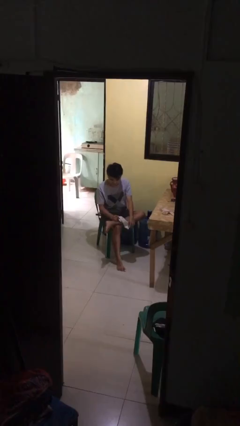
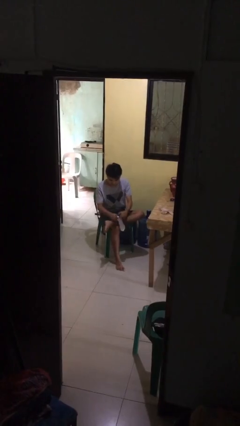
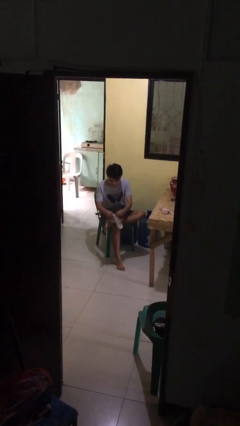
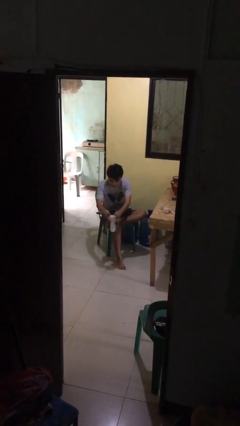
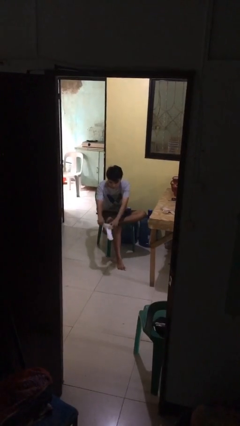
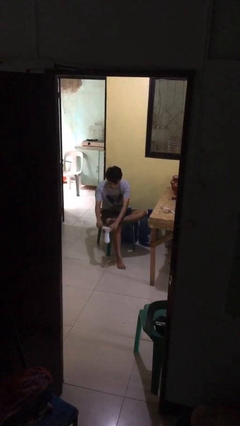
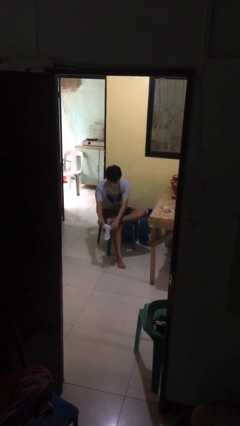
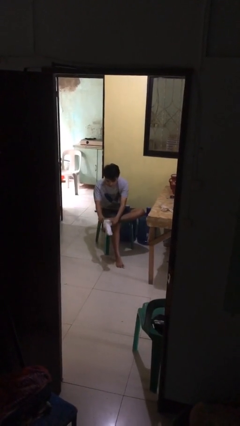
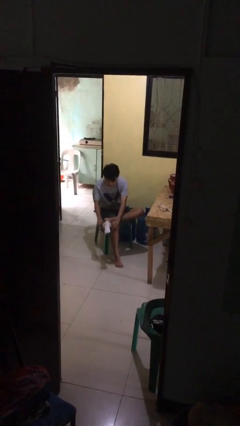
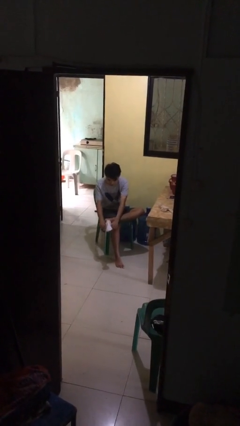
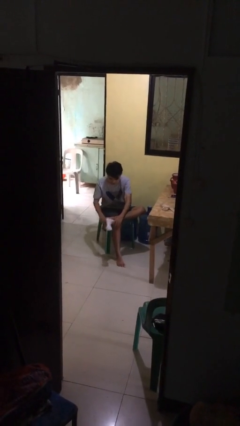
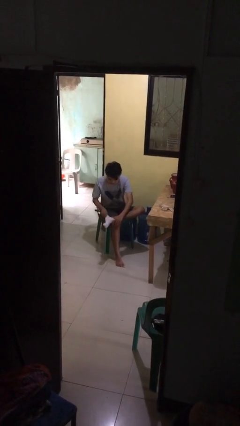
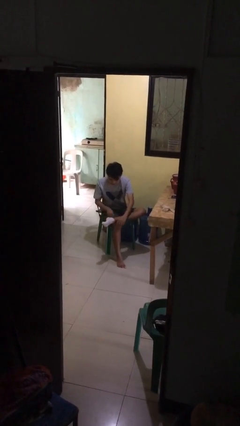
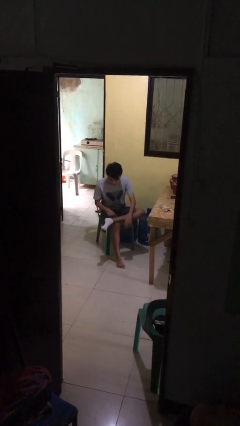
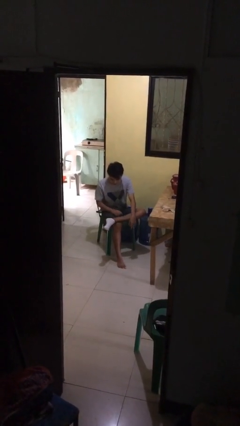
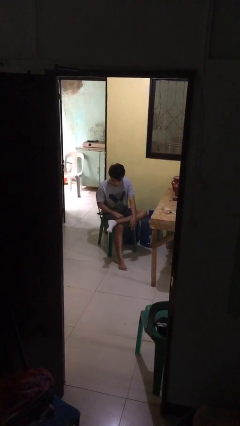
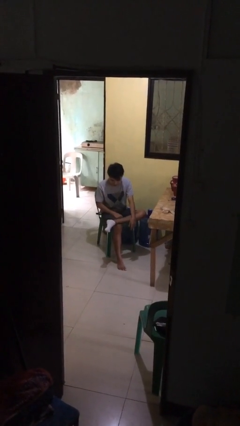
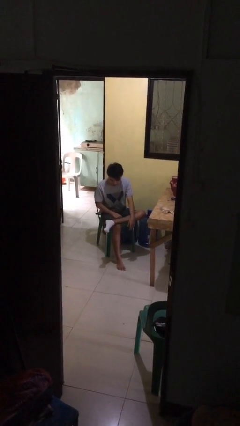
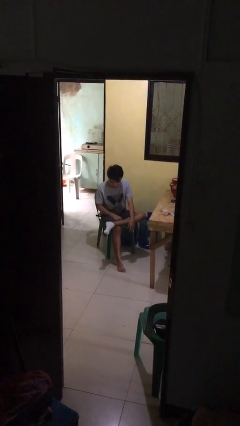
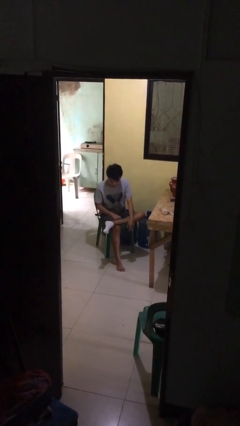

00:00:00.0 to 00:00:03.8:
person puts on socks

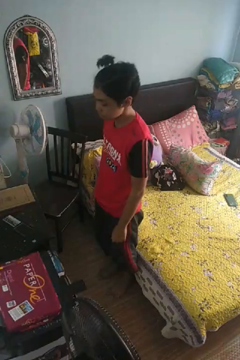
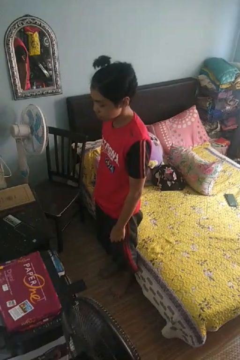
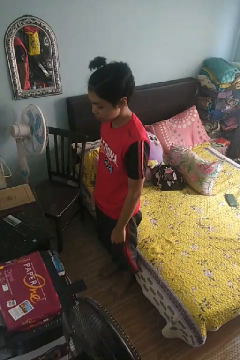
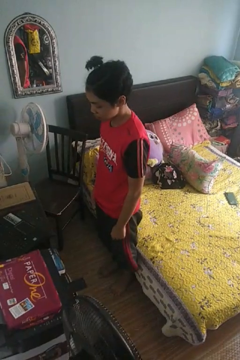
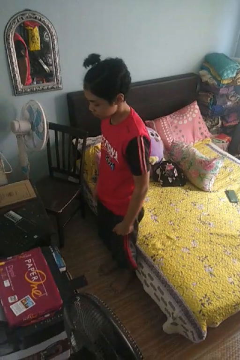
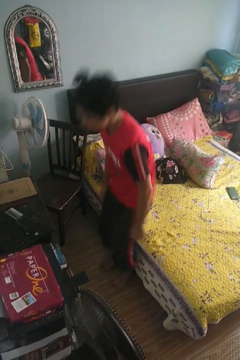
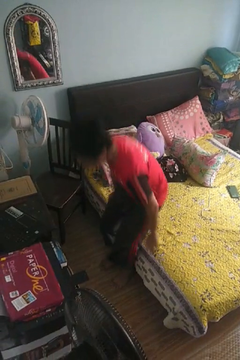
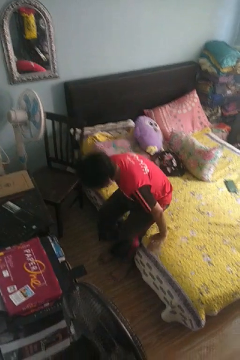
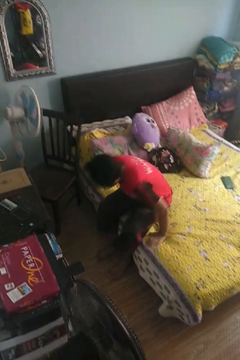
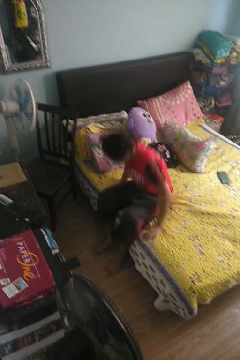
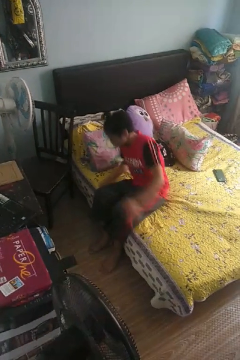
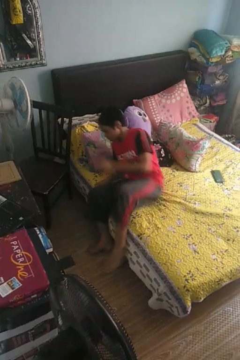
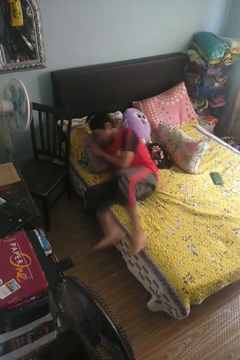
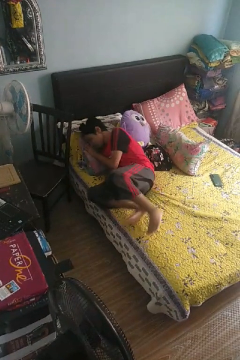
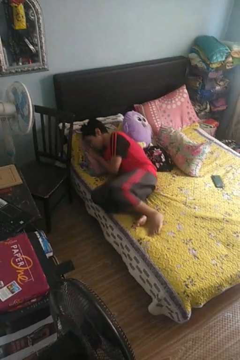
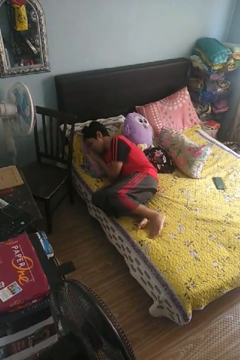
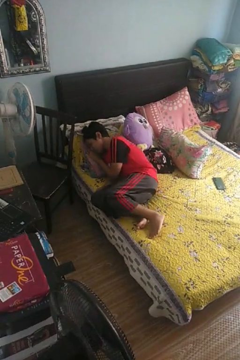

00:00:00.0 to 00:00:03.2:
person lies down on bed

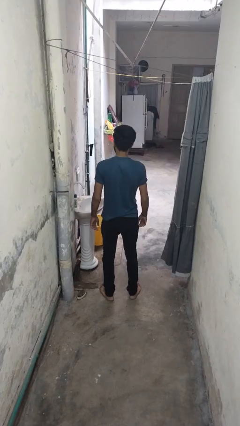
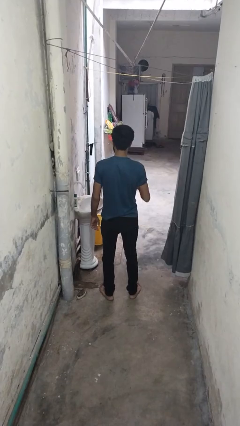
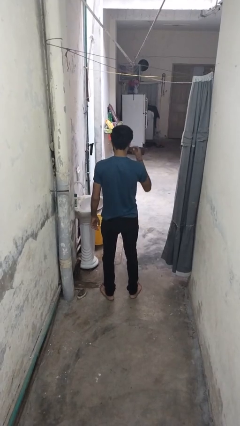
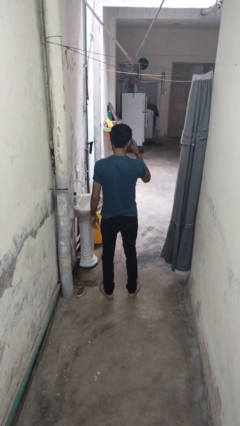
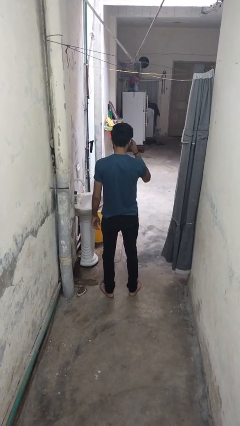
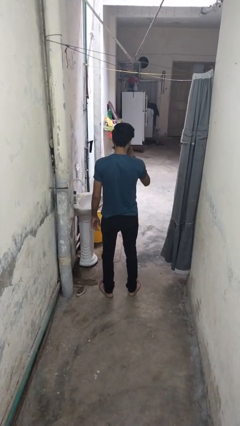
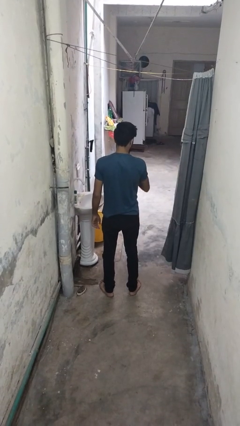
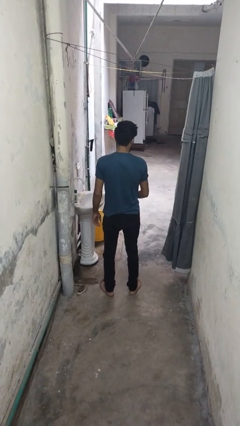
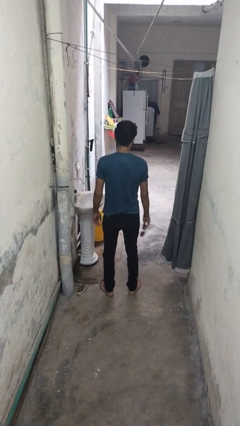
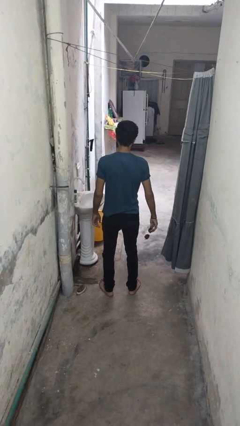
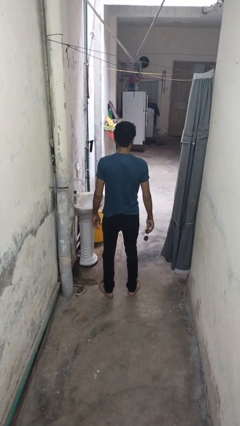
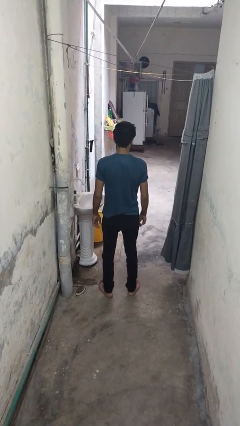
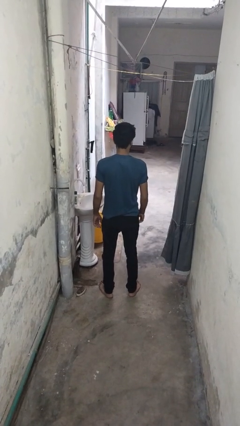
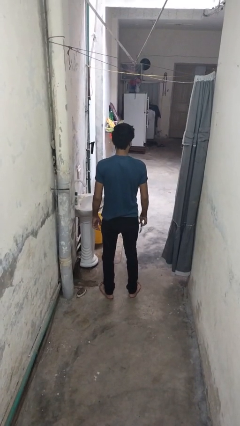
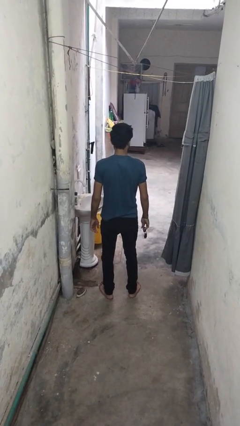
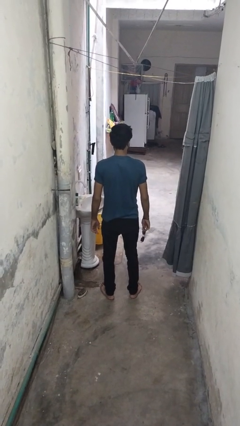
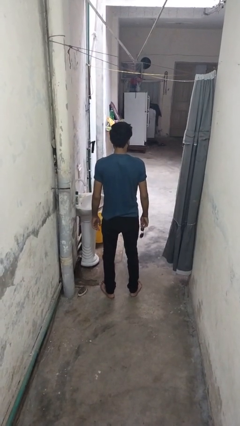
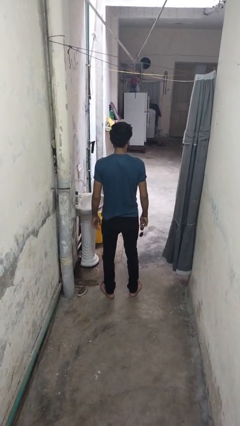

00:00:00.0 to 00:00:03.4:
person takes off sunglasses

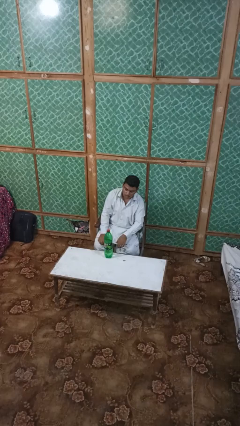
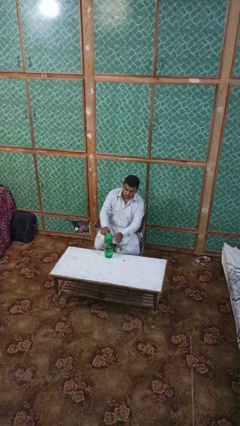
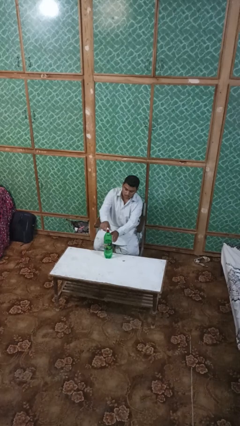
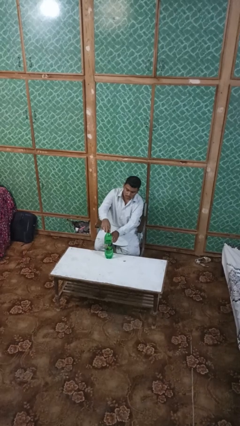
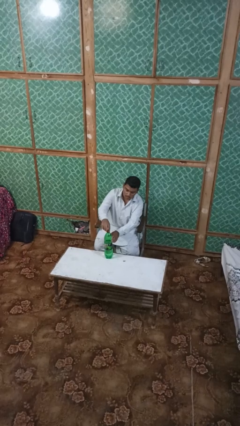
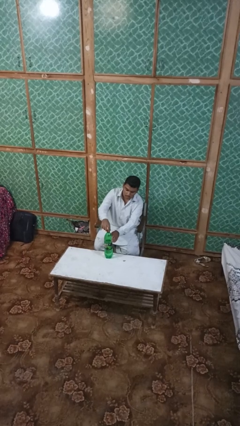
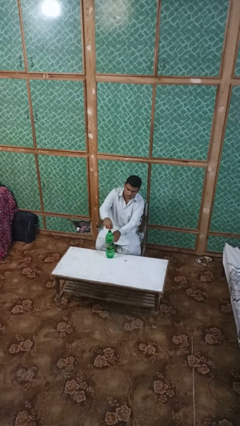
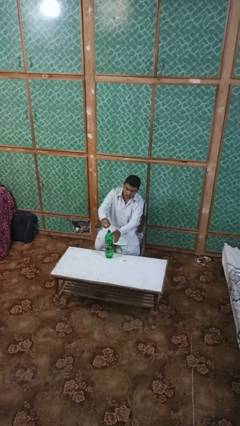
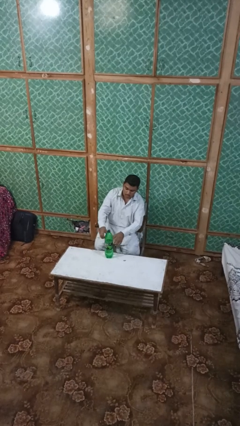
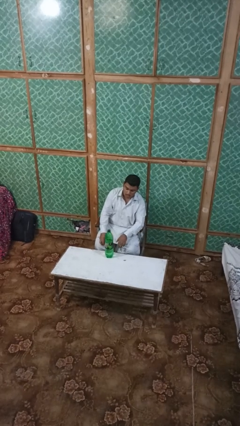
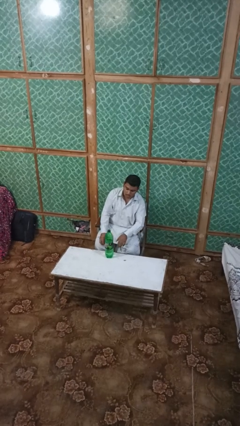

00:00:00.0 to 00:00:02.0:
person unscrews lid from bottle

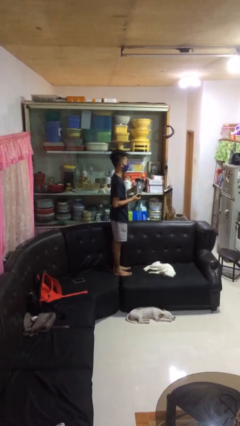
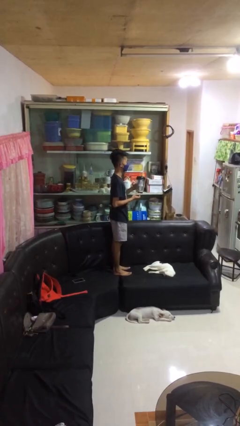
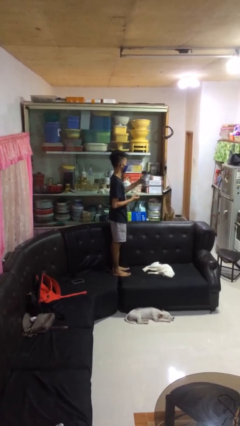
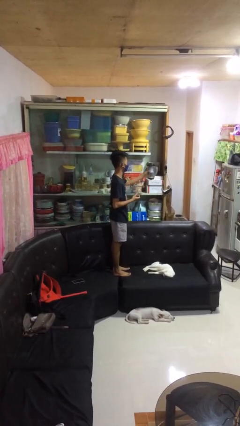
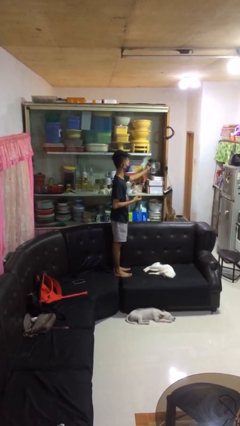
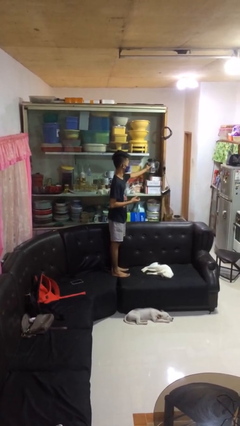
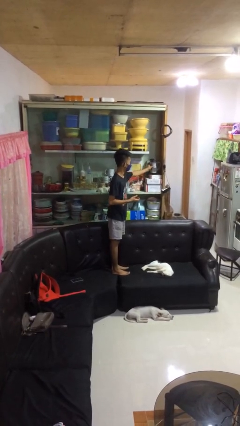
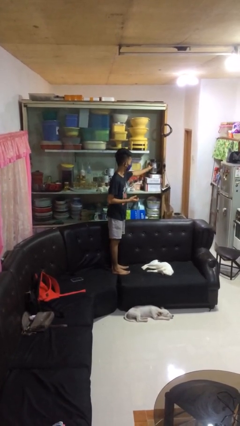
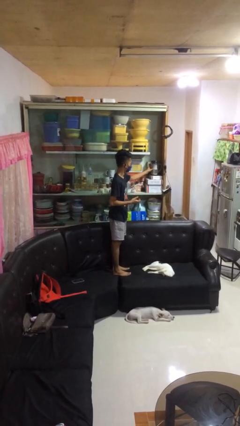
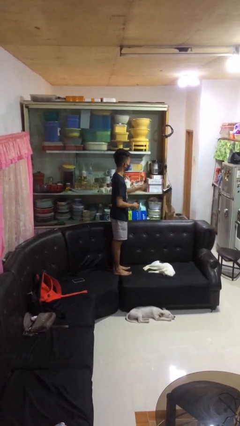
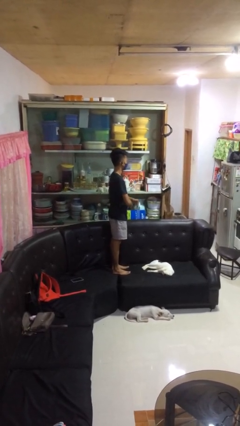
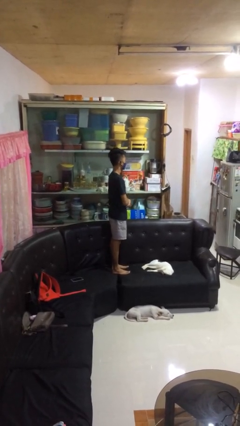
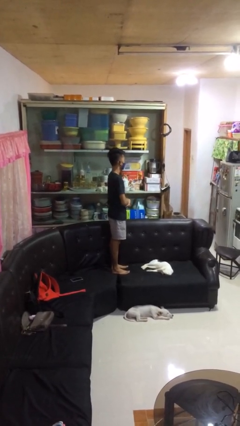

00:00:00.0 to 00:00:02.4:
person puts down object into cabinet

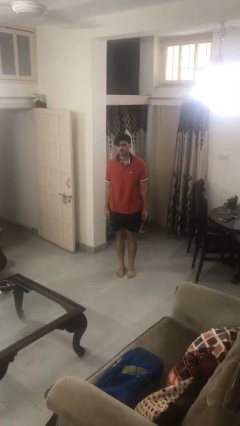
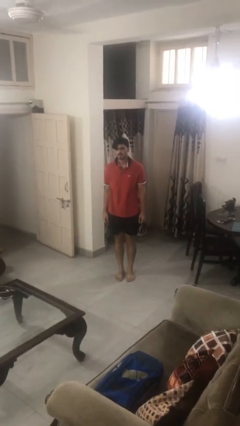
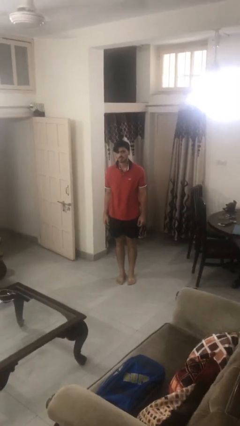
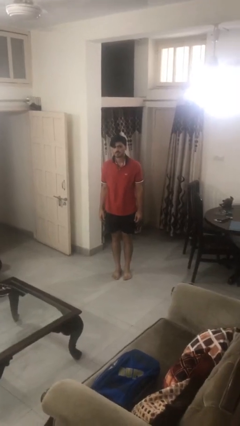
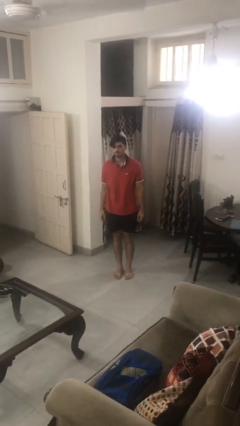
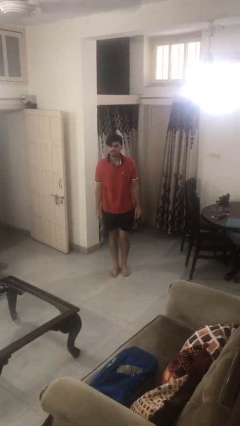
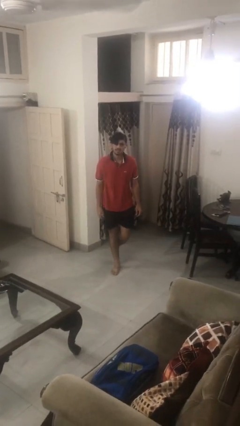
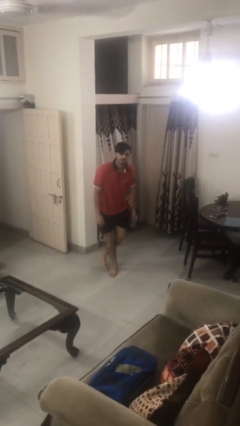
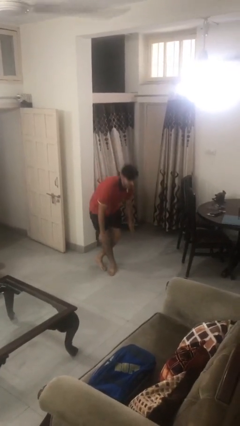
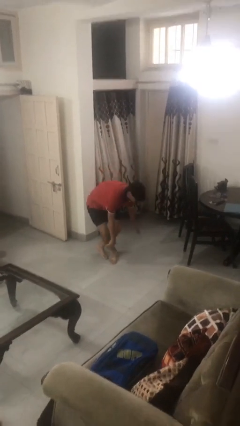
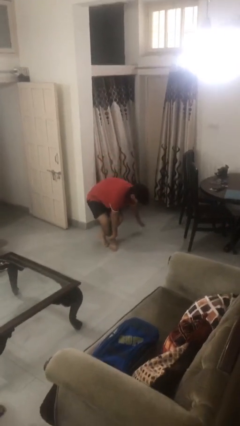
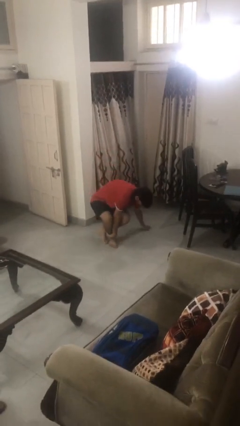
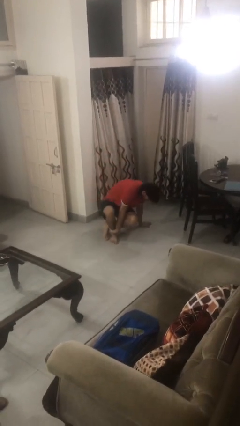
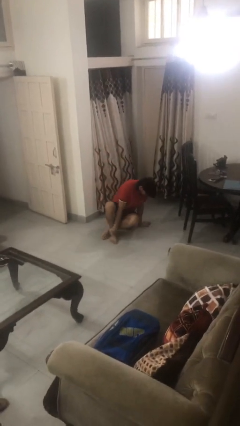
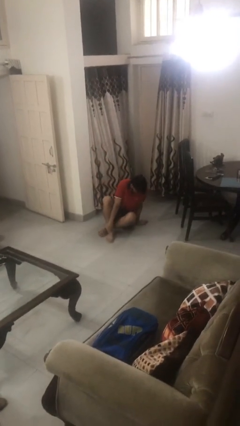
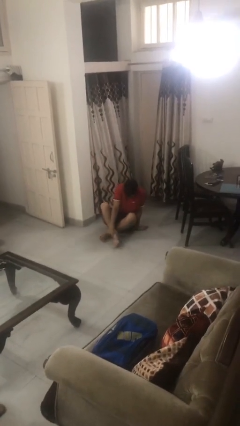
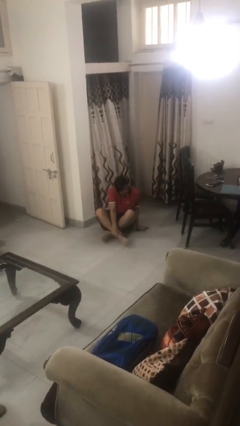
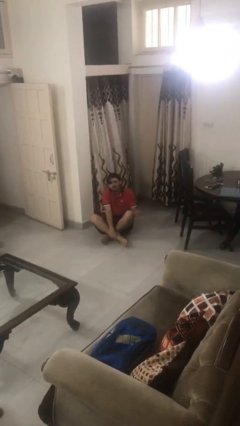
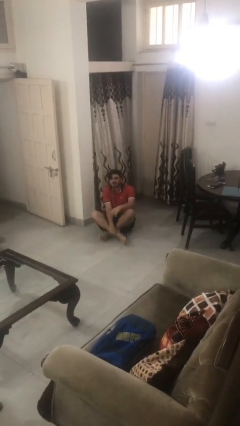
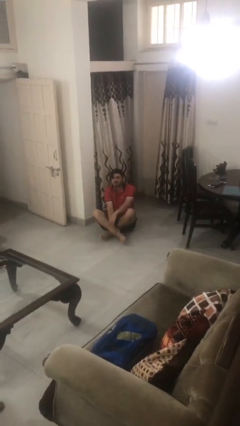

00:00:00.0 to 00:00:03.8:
person sits crisscross
